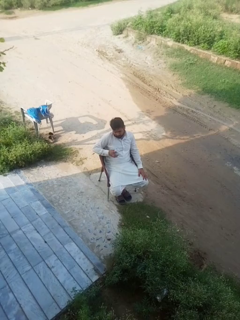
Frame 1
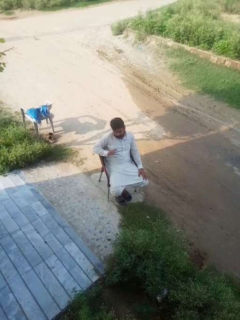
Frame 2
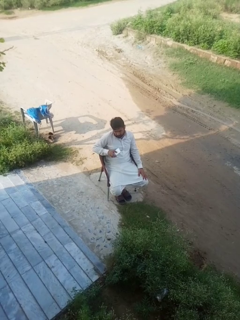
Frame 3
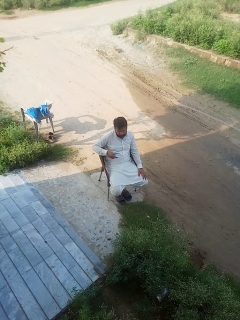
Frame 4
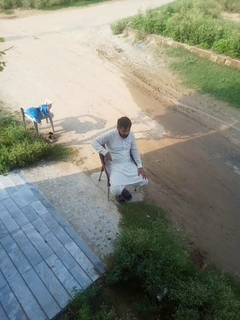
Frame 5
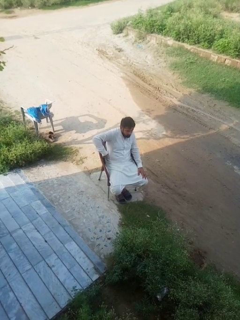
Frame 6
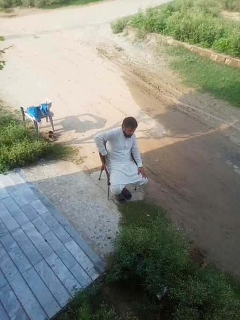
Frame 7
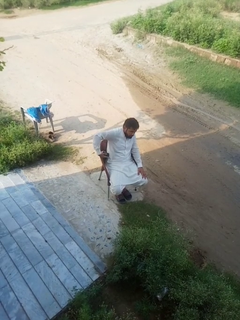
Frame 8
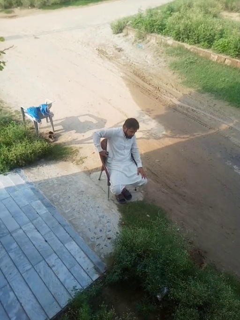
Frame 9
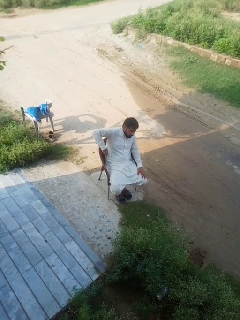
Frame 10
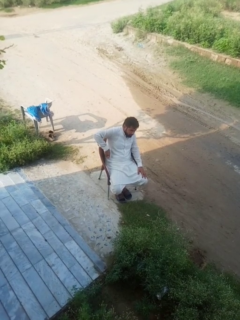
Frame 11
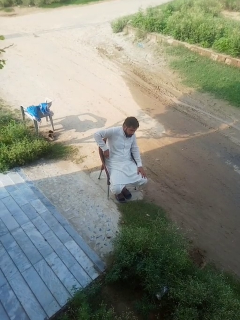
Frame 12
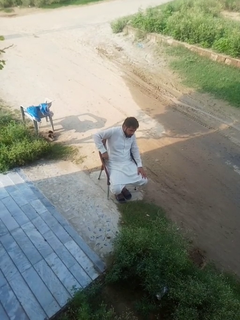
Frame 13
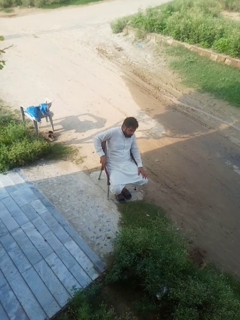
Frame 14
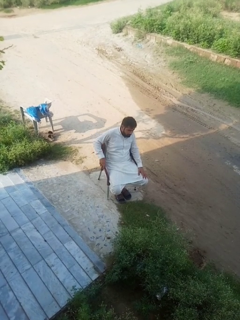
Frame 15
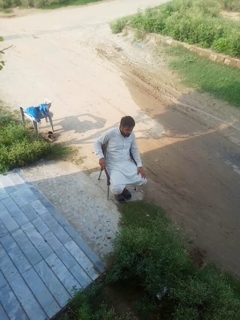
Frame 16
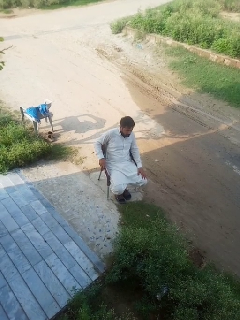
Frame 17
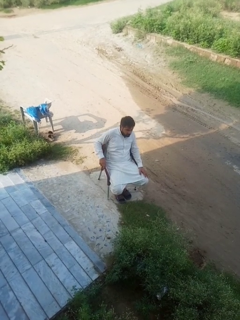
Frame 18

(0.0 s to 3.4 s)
person puts phone into pocket

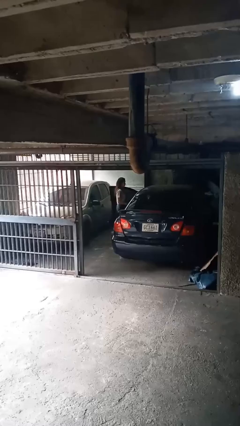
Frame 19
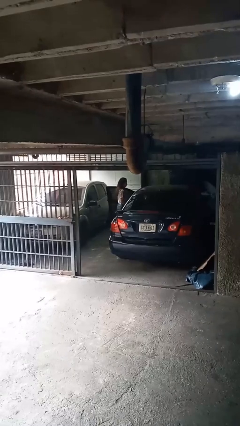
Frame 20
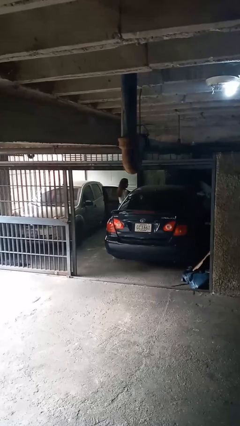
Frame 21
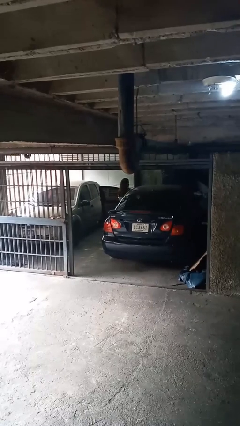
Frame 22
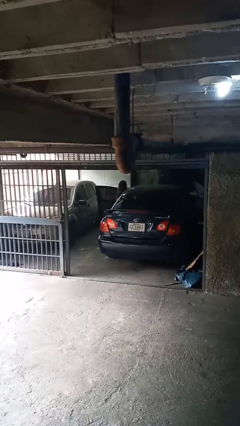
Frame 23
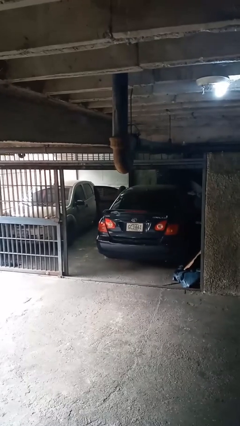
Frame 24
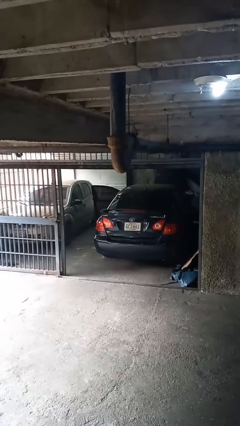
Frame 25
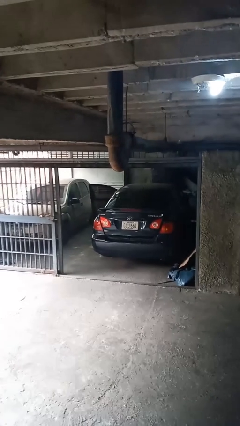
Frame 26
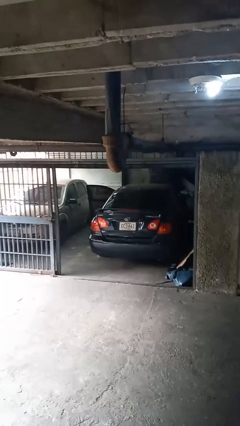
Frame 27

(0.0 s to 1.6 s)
person enters car

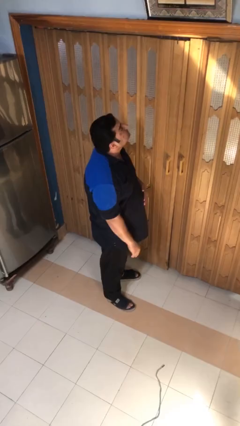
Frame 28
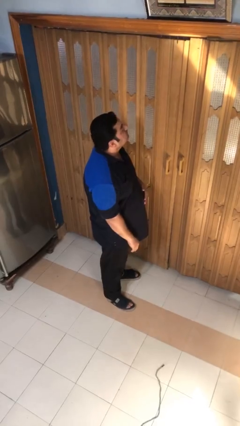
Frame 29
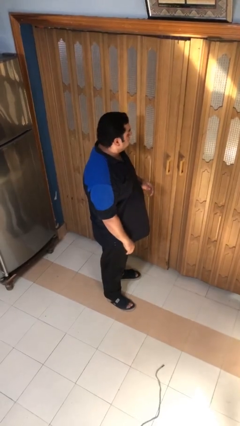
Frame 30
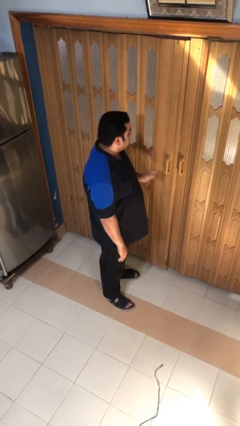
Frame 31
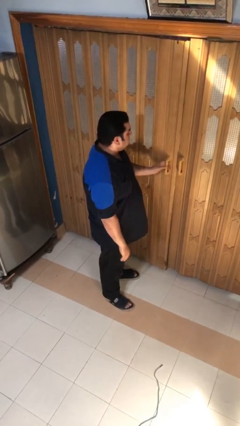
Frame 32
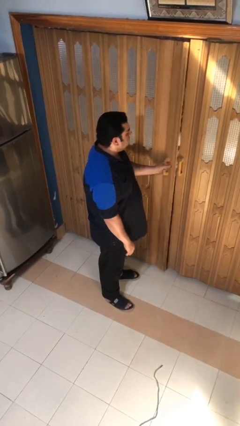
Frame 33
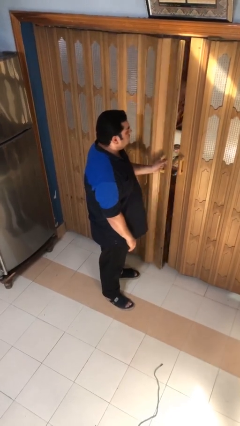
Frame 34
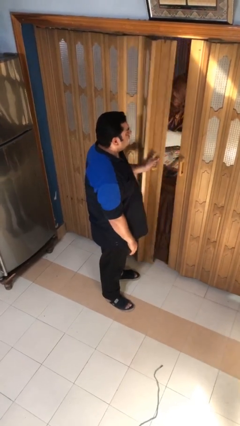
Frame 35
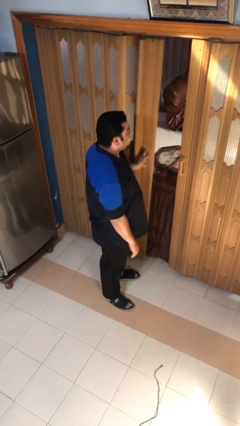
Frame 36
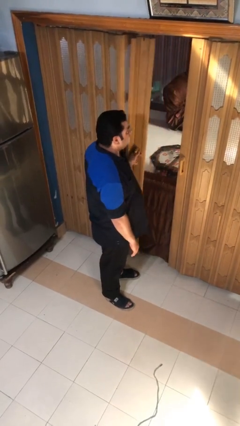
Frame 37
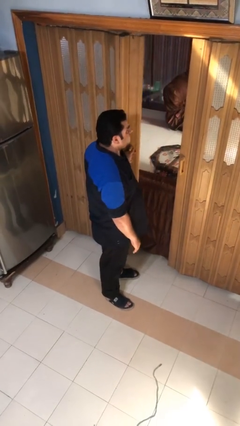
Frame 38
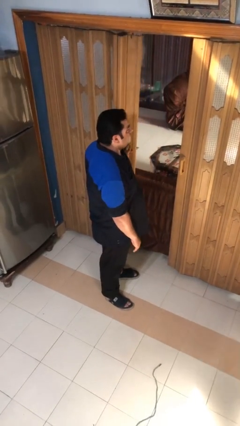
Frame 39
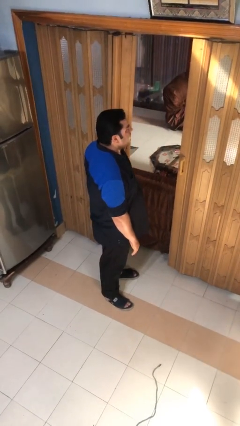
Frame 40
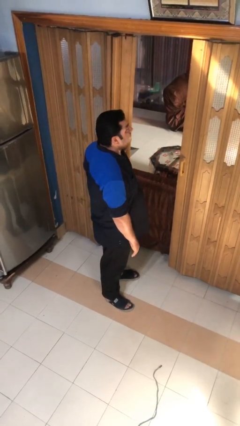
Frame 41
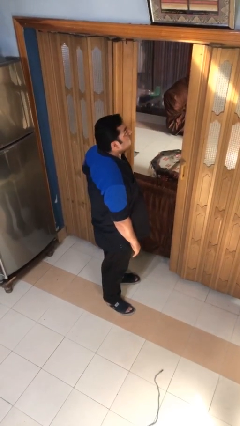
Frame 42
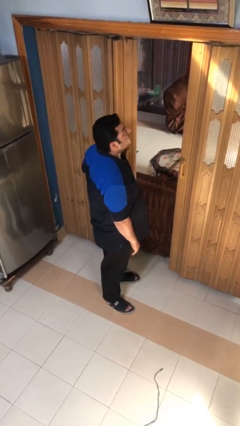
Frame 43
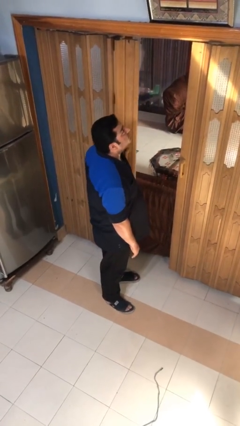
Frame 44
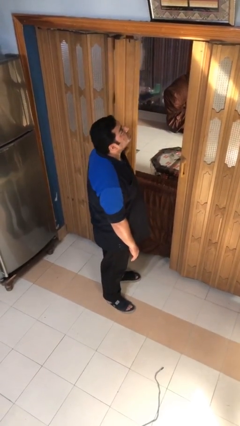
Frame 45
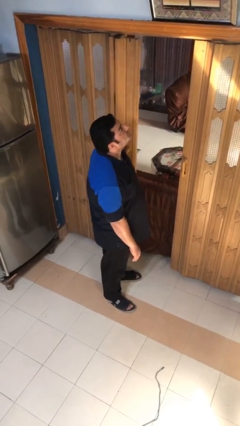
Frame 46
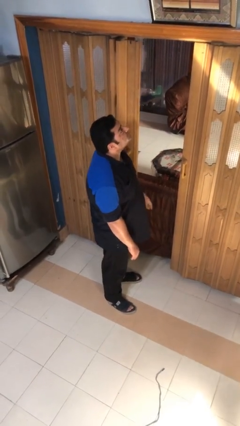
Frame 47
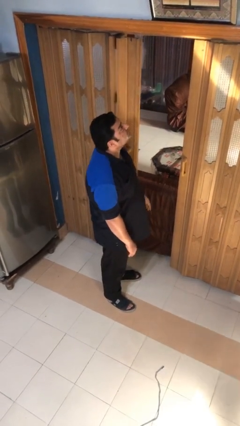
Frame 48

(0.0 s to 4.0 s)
person opens sliding door

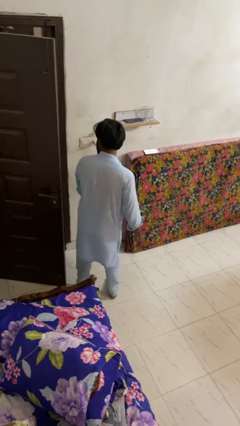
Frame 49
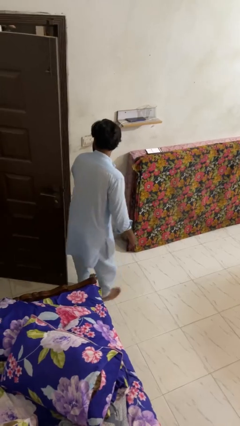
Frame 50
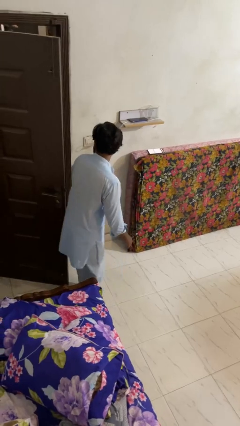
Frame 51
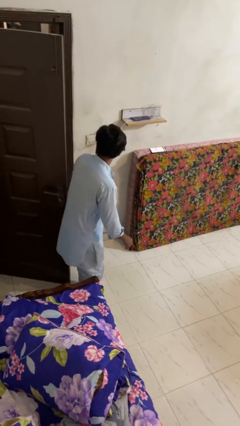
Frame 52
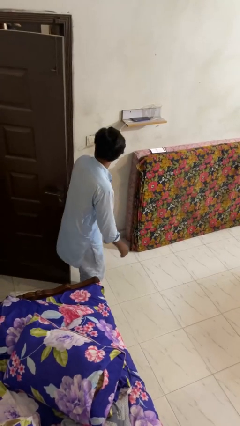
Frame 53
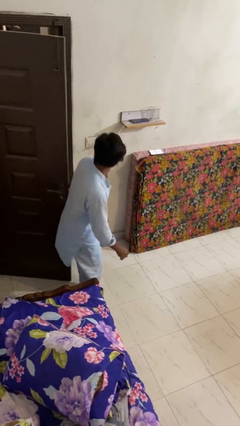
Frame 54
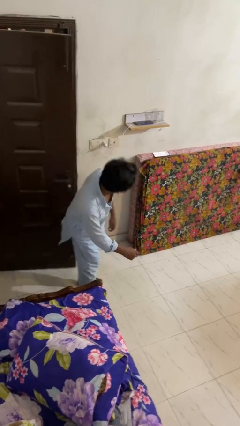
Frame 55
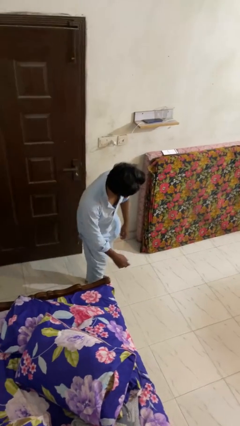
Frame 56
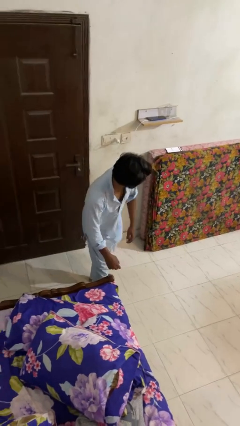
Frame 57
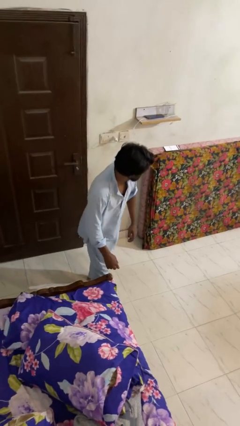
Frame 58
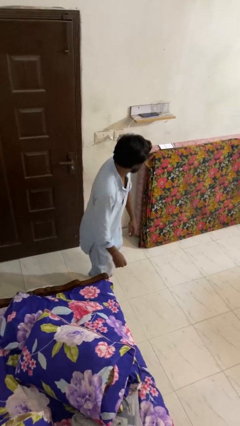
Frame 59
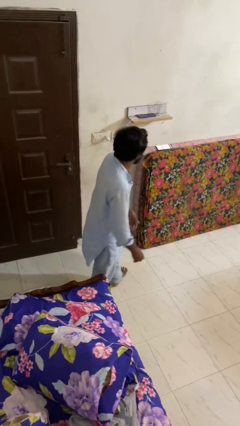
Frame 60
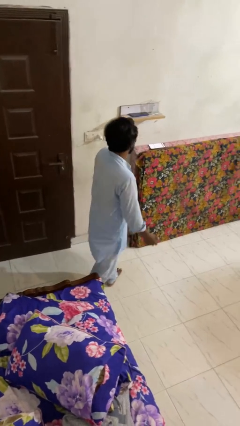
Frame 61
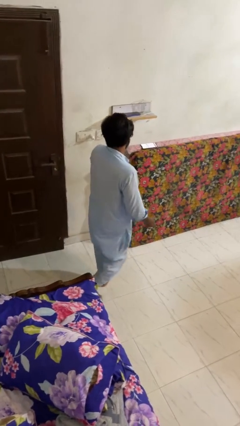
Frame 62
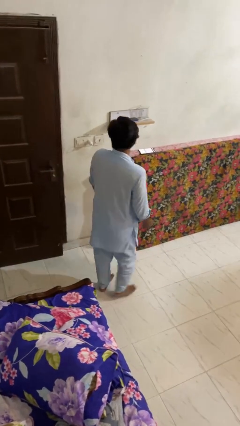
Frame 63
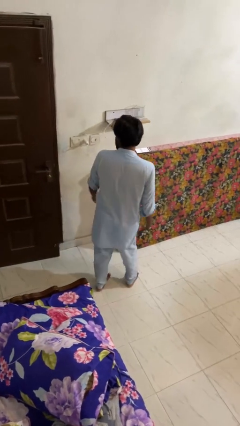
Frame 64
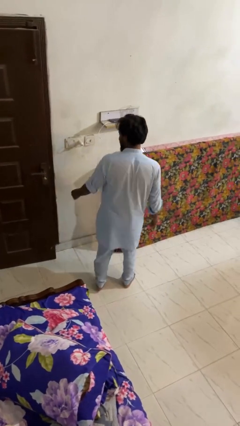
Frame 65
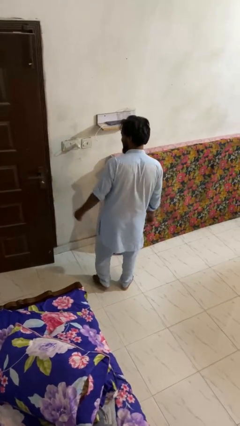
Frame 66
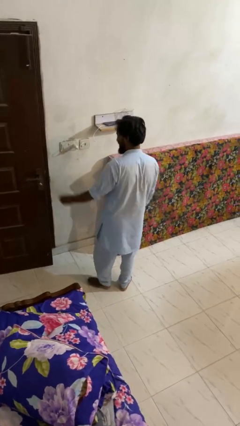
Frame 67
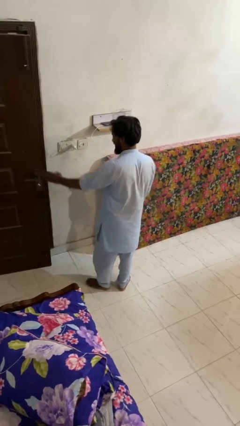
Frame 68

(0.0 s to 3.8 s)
person closes door with hip

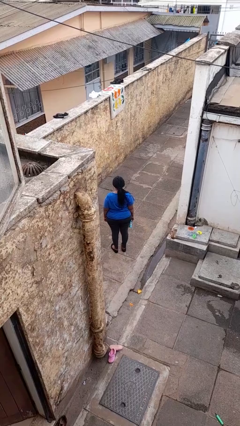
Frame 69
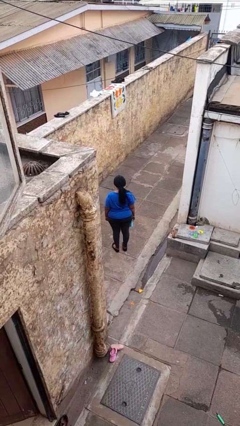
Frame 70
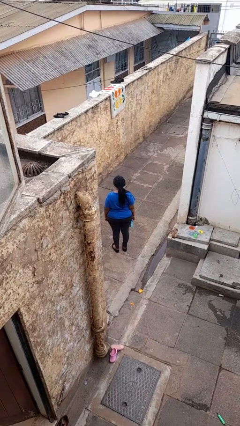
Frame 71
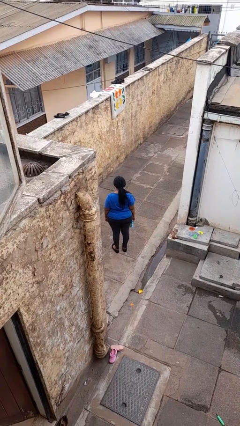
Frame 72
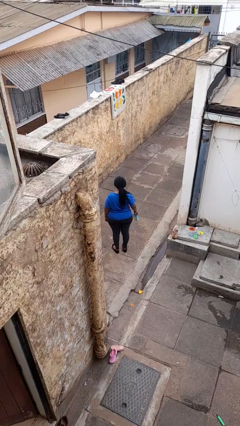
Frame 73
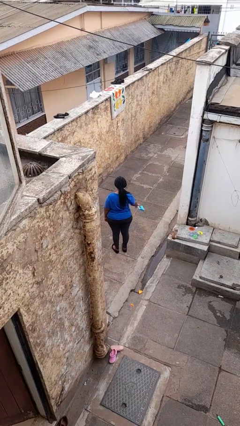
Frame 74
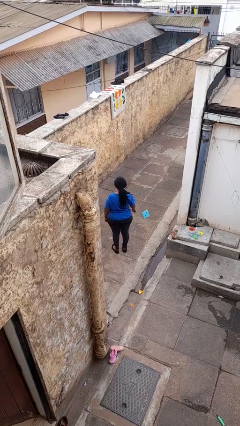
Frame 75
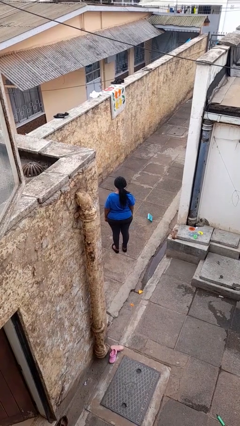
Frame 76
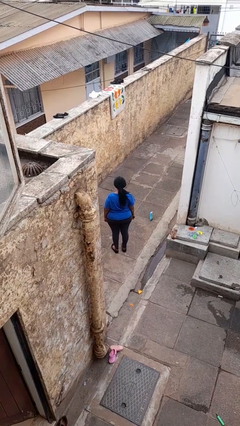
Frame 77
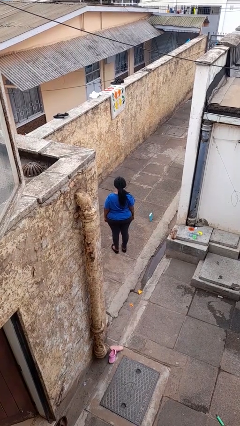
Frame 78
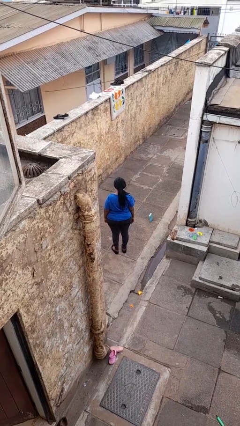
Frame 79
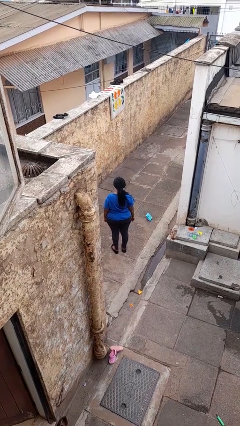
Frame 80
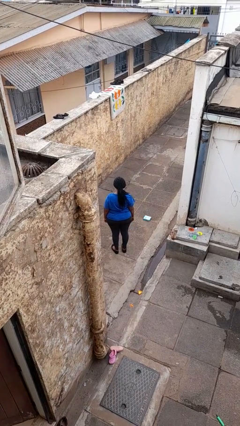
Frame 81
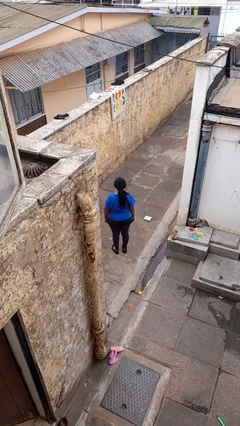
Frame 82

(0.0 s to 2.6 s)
person throws object to ground

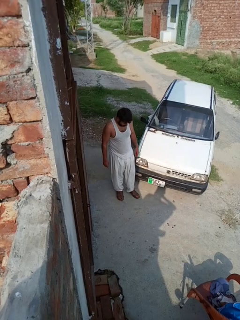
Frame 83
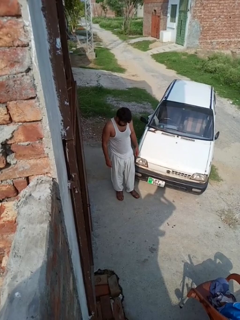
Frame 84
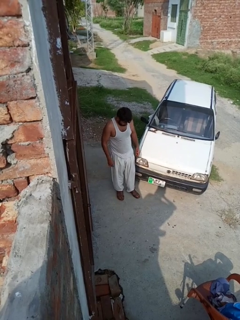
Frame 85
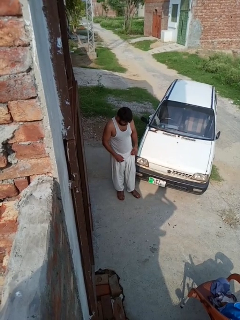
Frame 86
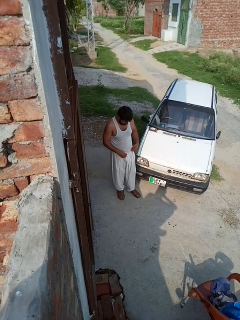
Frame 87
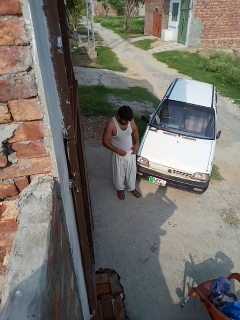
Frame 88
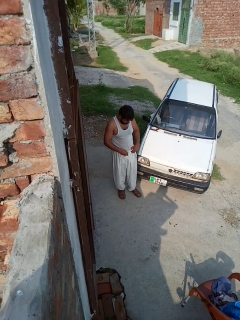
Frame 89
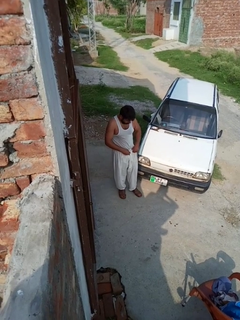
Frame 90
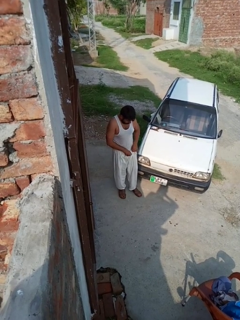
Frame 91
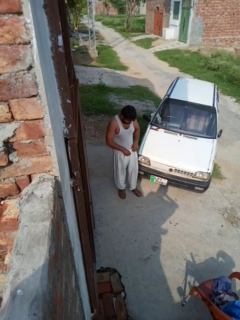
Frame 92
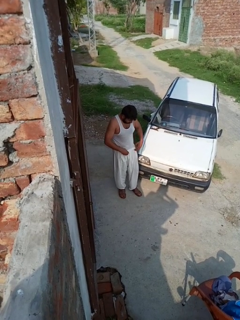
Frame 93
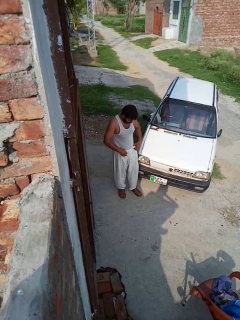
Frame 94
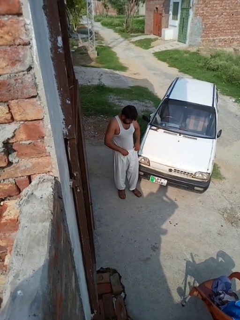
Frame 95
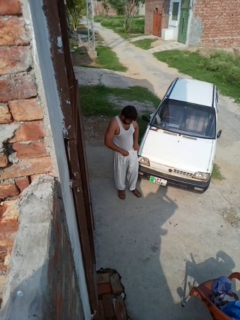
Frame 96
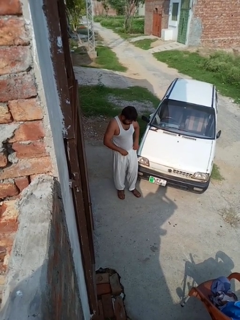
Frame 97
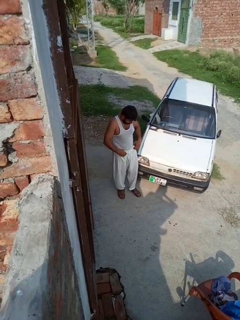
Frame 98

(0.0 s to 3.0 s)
person tucks in shirt

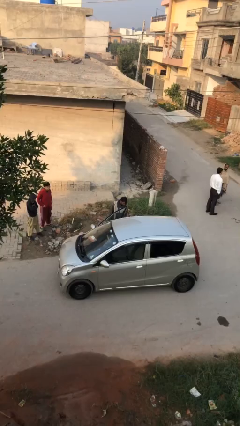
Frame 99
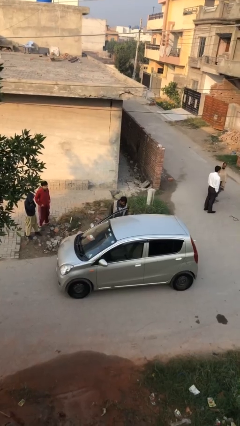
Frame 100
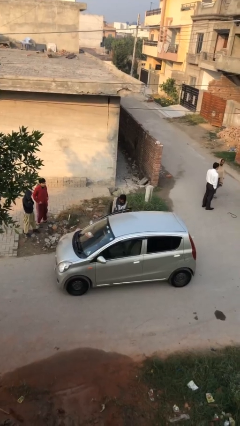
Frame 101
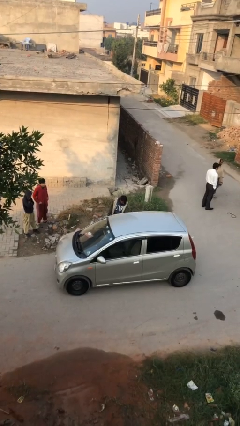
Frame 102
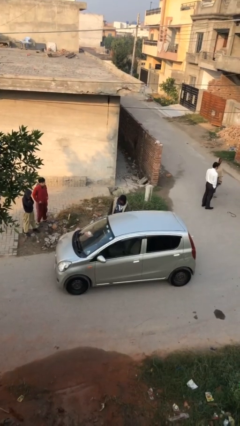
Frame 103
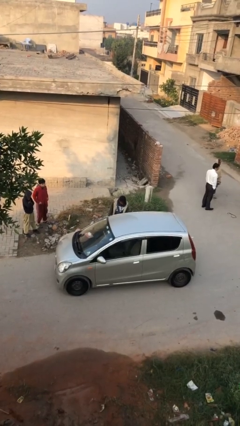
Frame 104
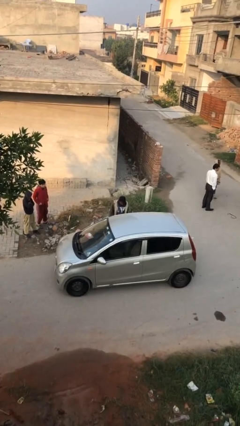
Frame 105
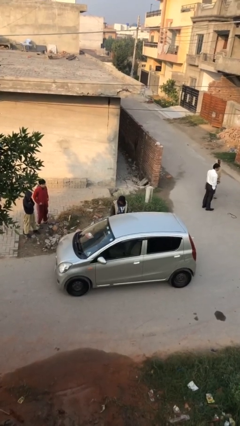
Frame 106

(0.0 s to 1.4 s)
person closes car door
